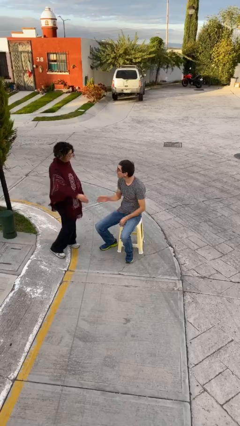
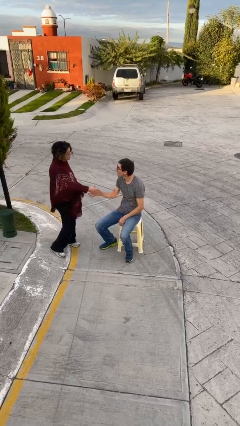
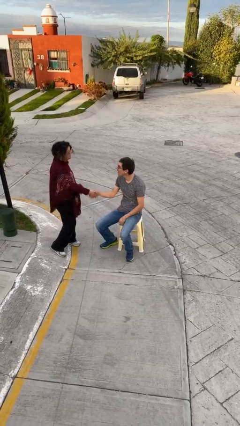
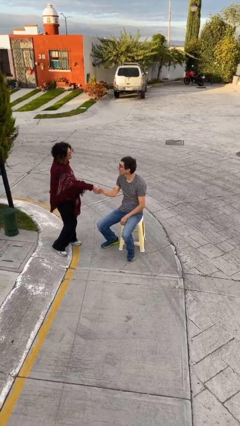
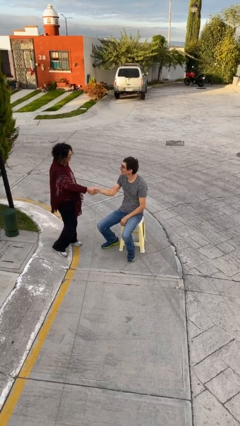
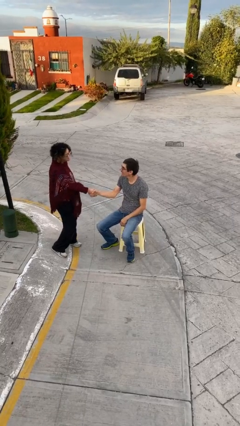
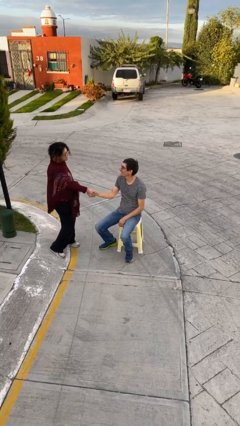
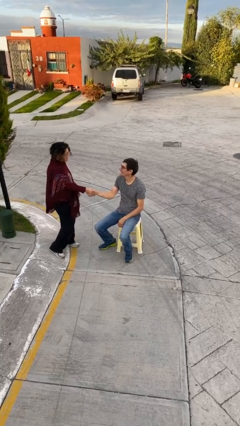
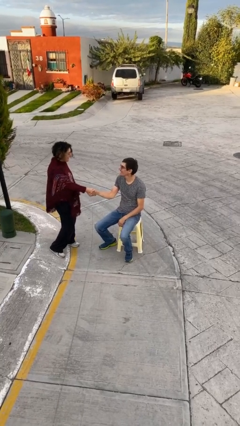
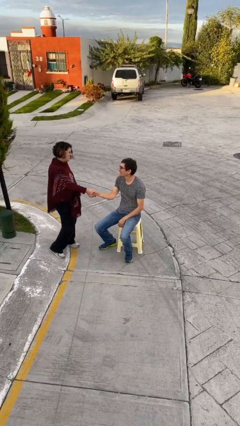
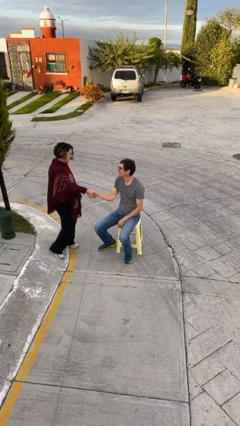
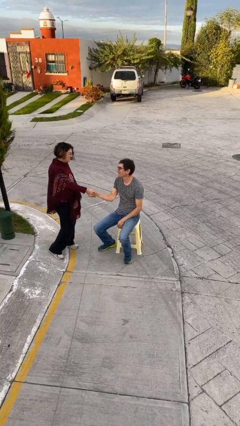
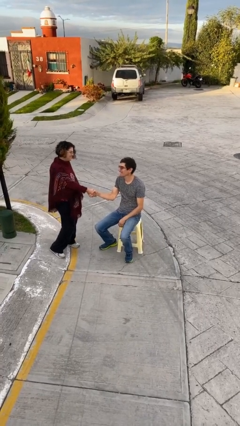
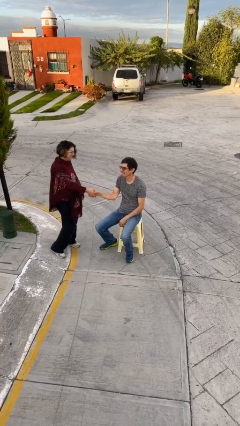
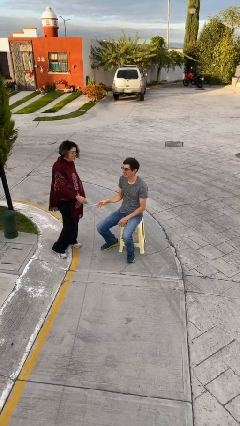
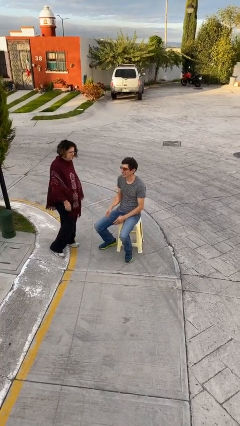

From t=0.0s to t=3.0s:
person shakes hand

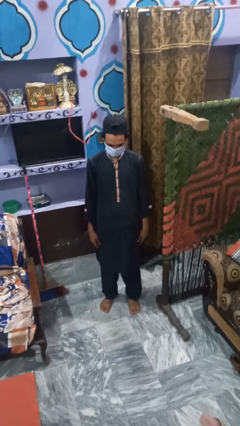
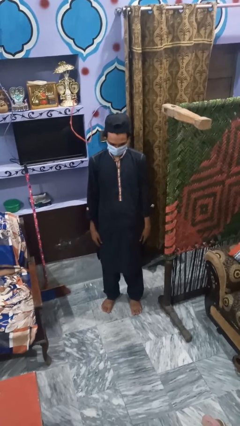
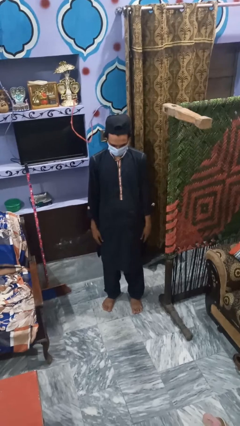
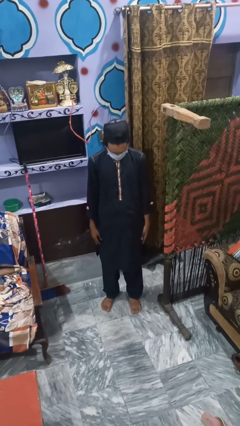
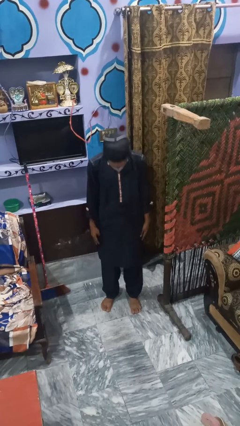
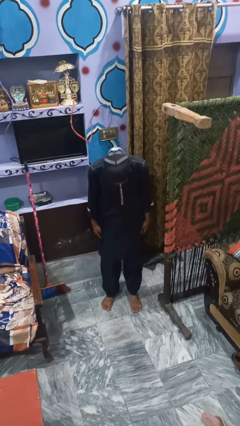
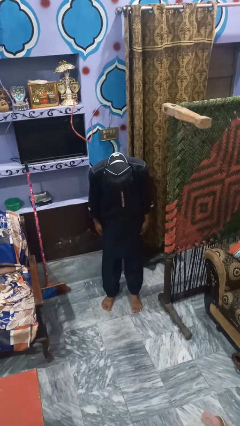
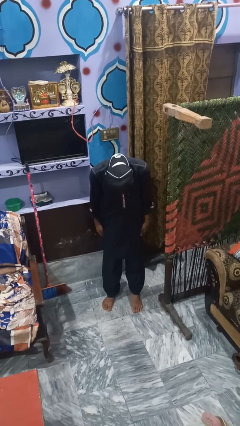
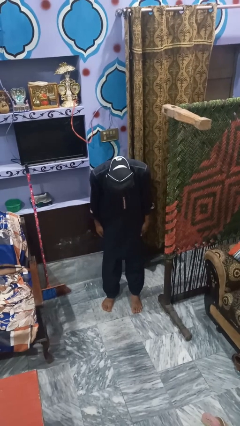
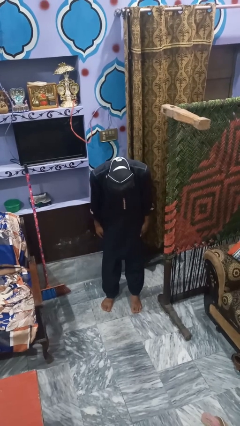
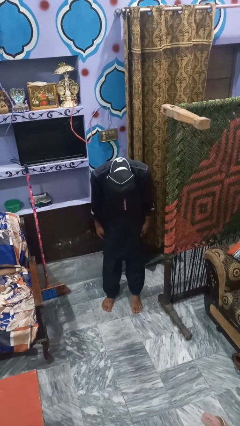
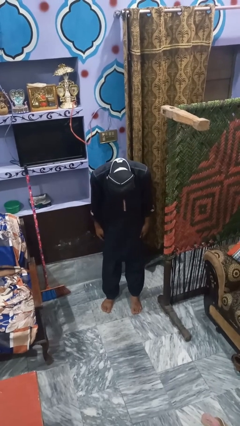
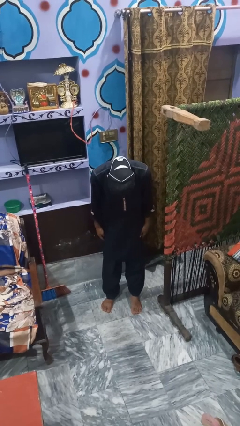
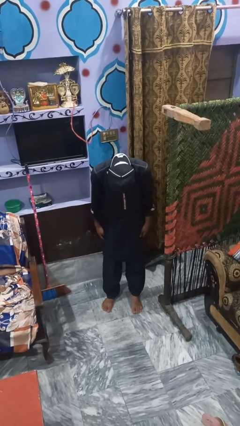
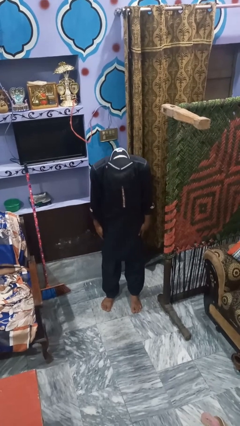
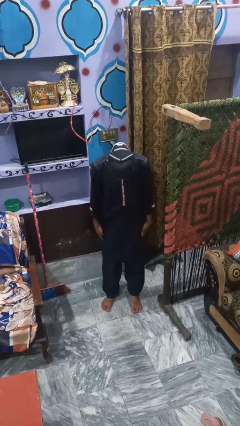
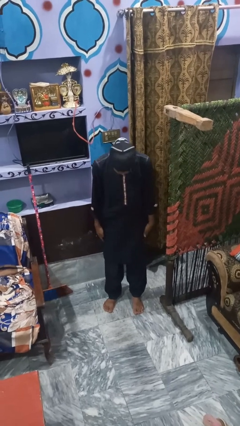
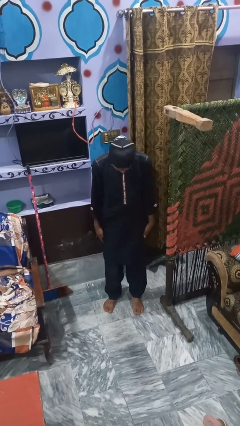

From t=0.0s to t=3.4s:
person bows

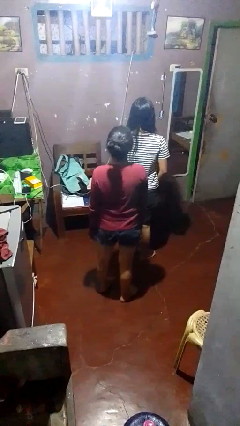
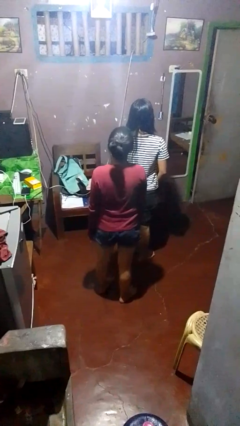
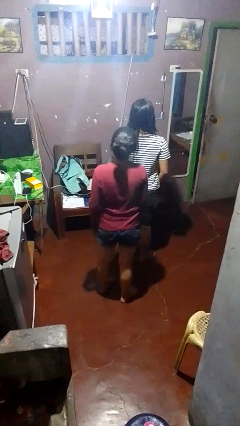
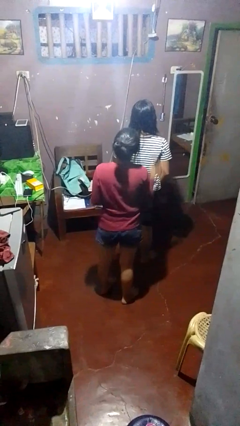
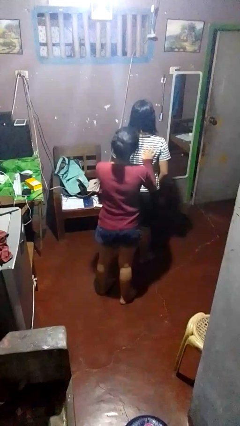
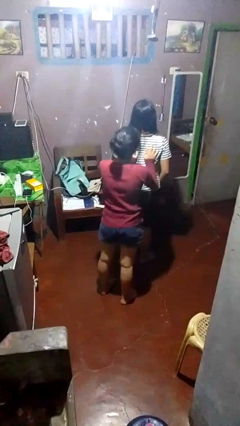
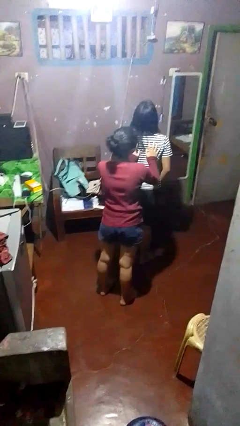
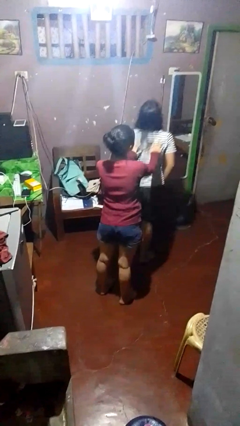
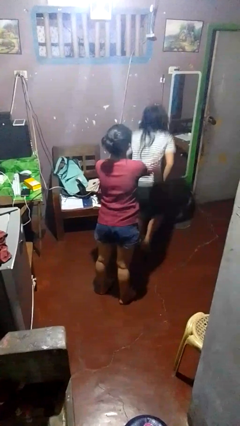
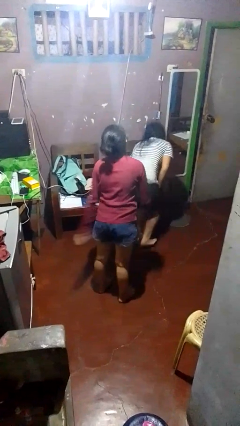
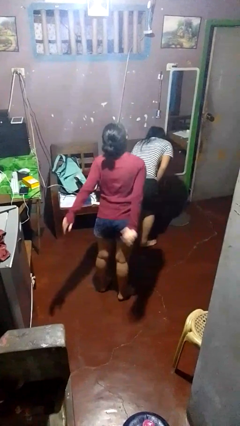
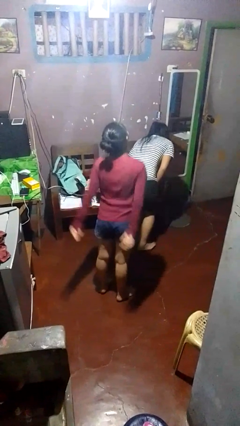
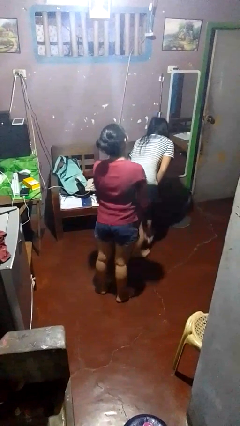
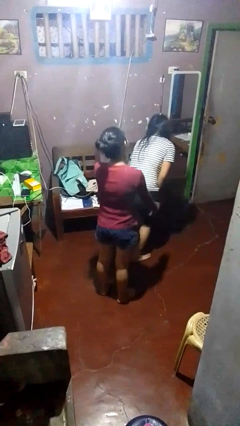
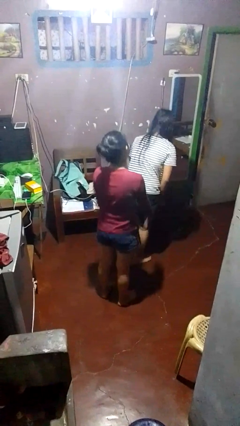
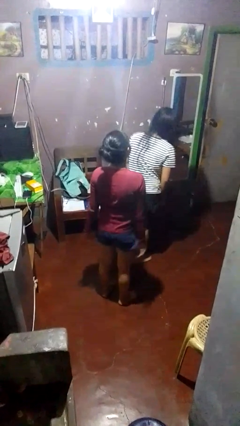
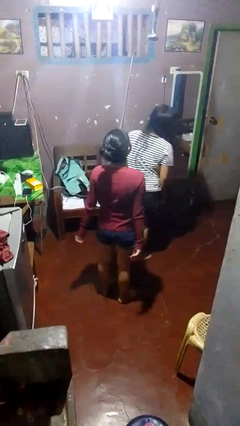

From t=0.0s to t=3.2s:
person shoves person

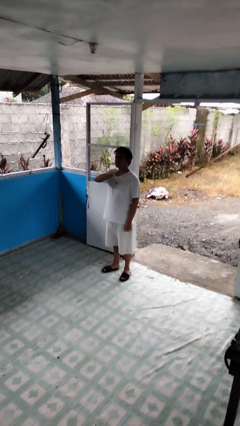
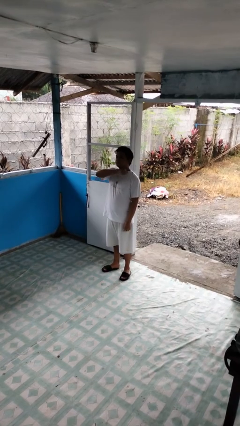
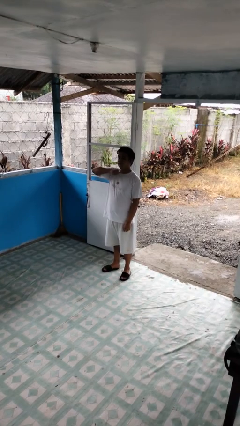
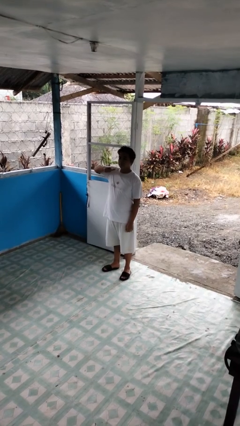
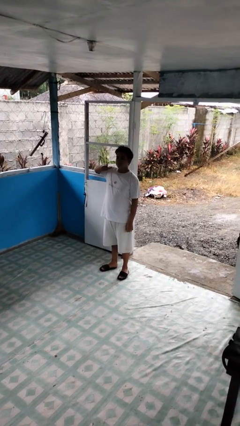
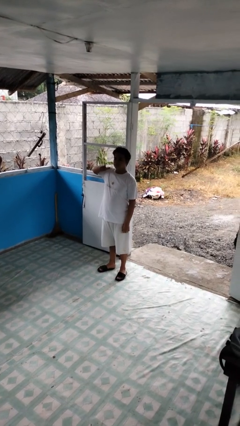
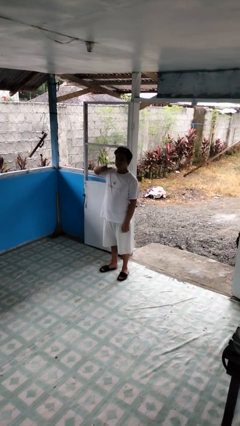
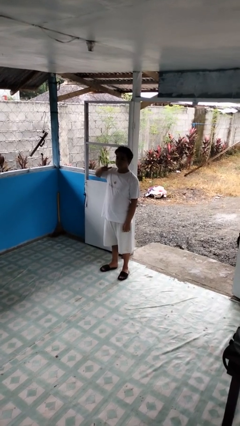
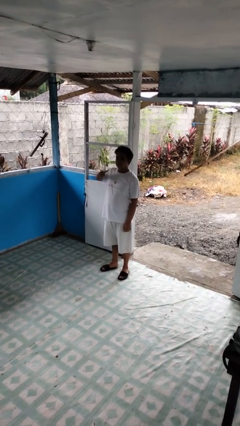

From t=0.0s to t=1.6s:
person gestures cut

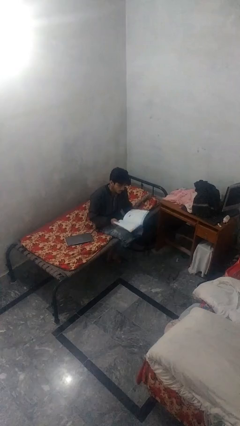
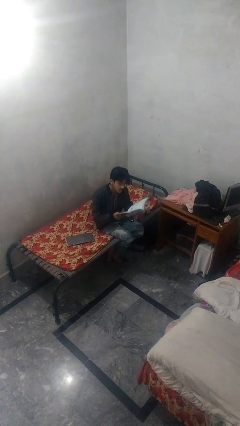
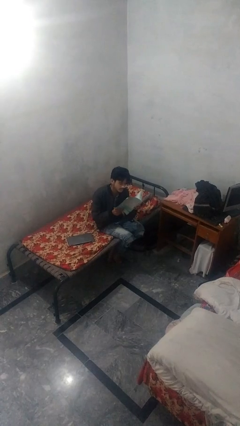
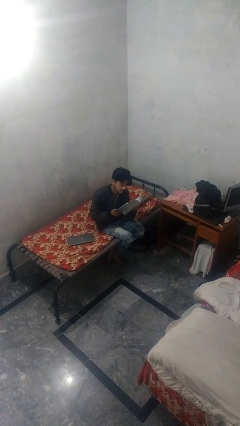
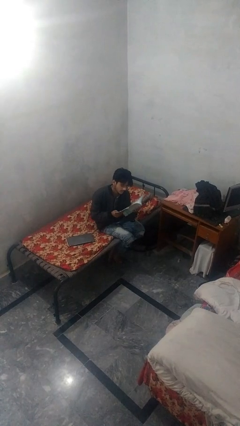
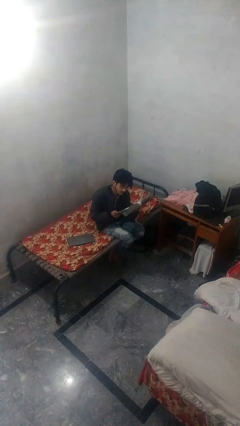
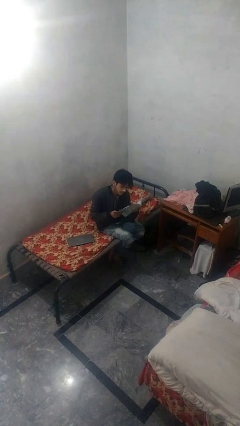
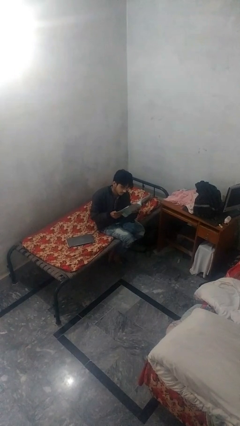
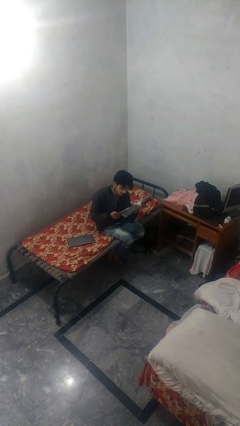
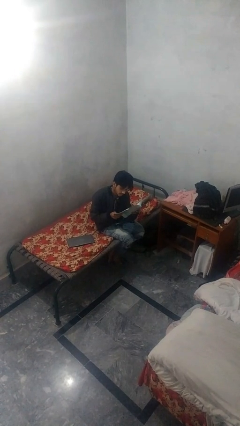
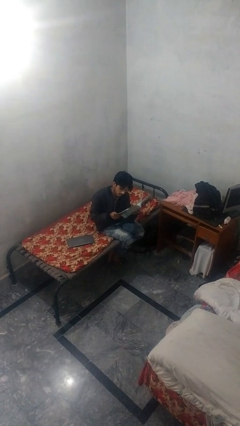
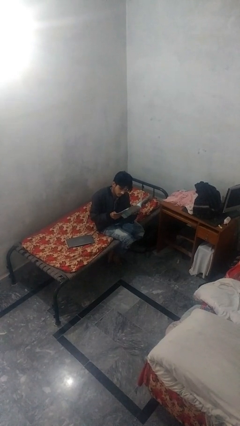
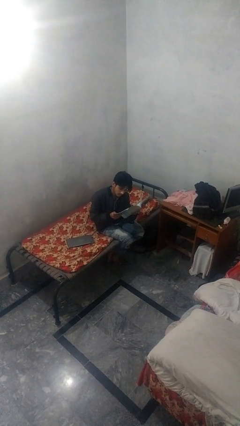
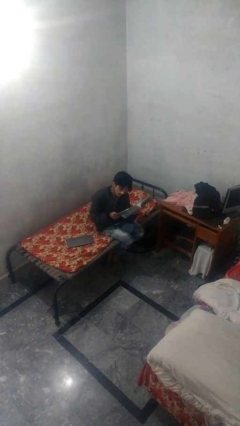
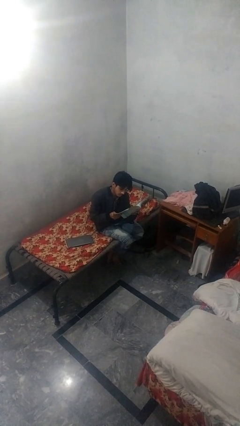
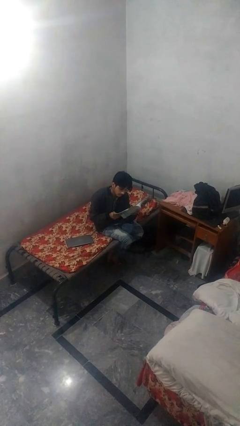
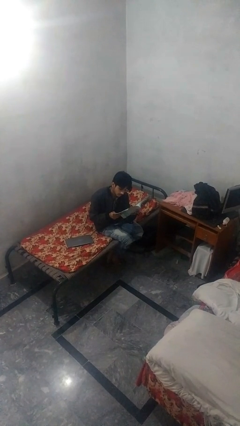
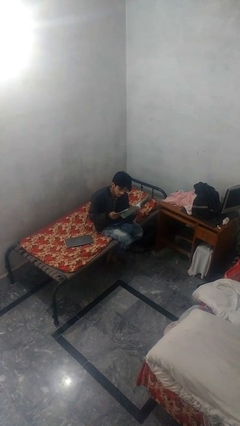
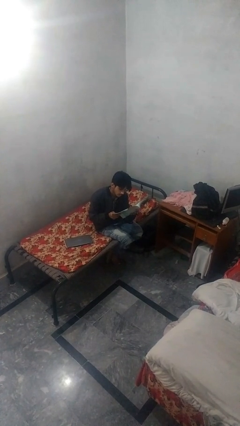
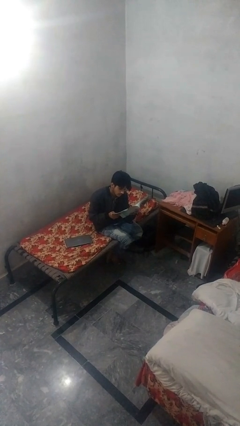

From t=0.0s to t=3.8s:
person reads document

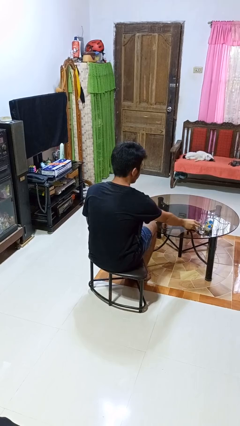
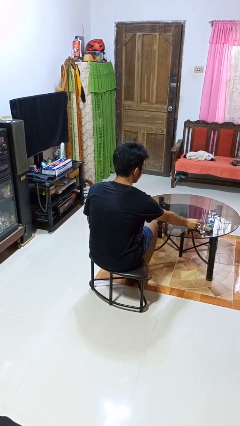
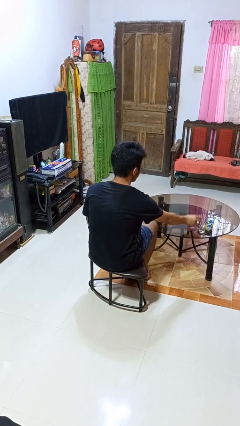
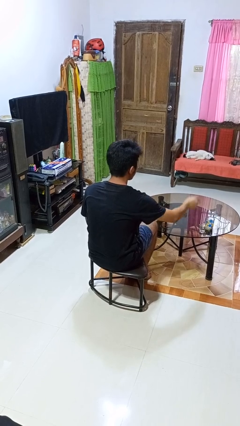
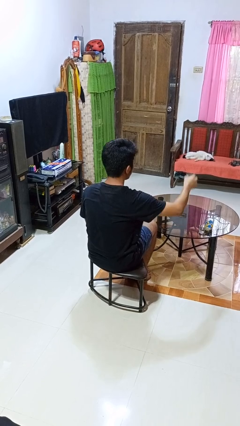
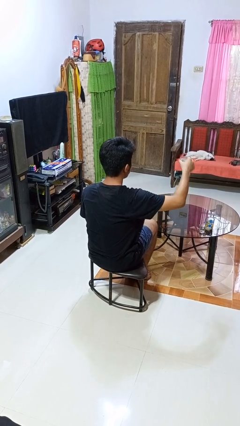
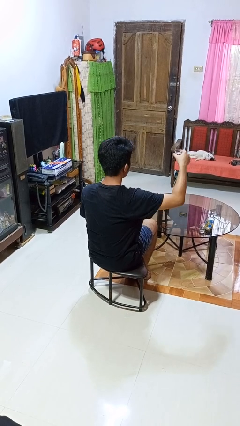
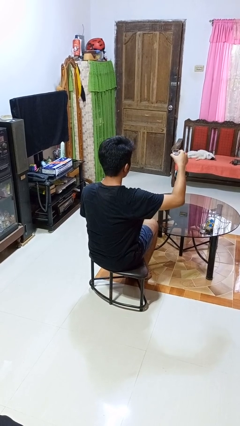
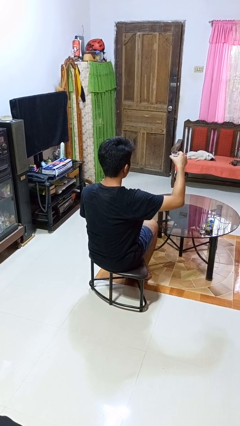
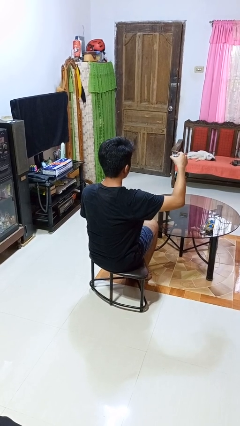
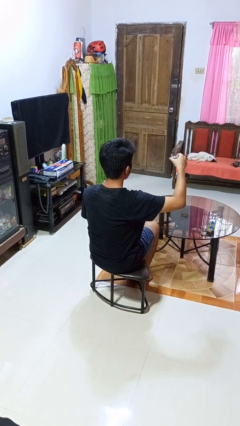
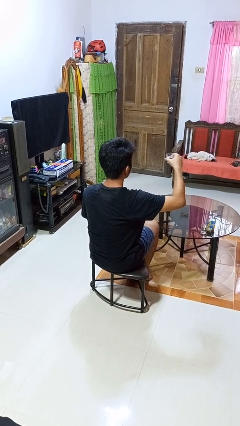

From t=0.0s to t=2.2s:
person picks up object from table
